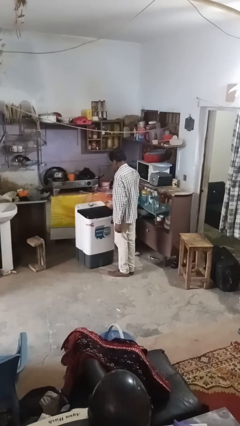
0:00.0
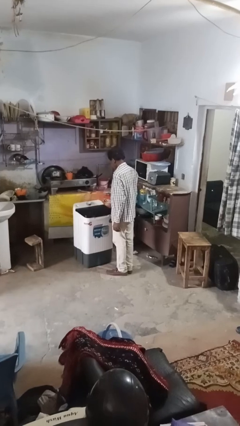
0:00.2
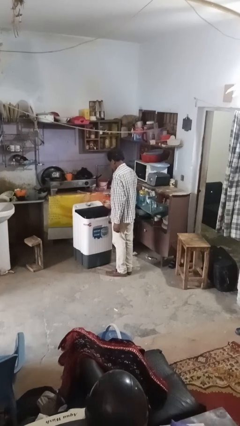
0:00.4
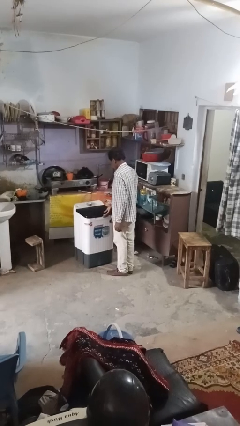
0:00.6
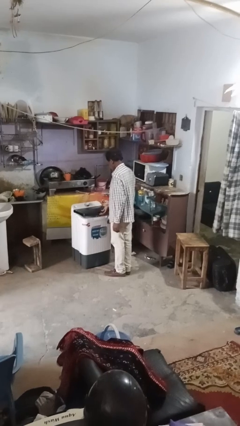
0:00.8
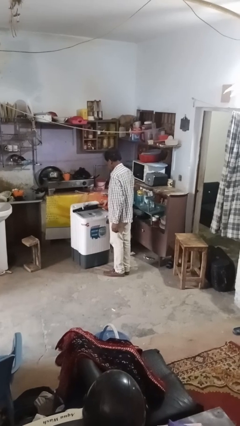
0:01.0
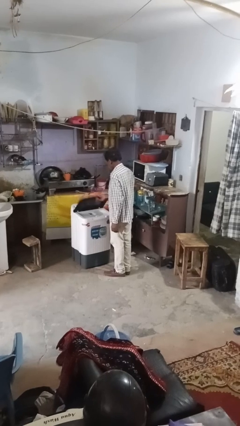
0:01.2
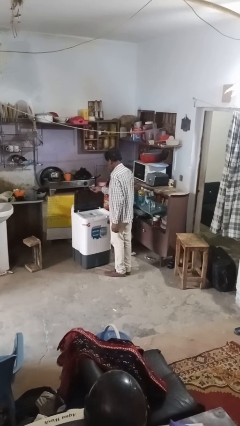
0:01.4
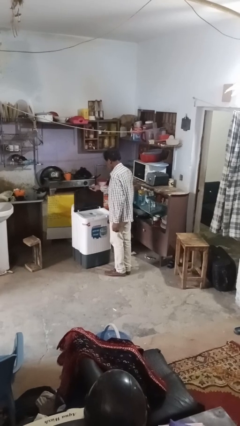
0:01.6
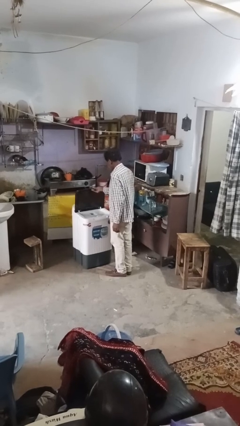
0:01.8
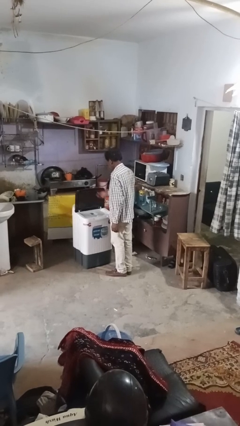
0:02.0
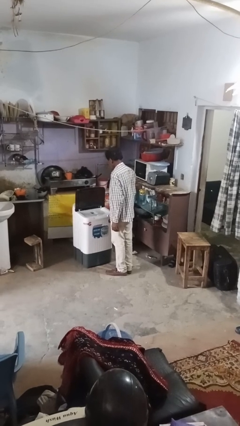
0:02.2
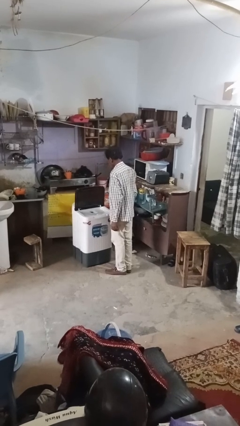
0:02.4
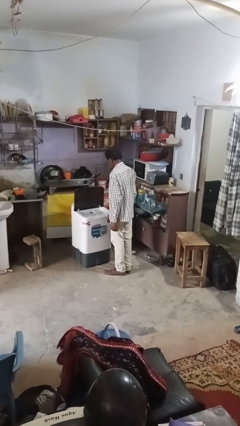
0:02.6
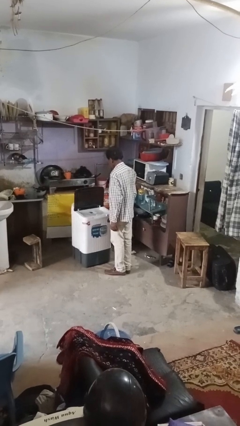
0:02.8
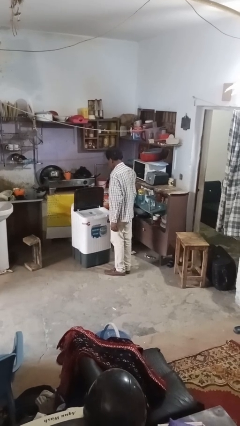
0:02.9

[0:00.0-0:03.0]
person opens clothes washer

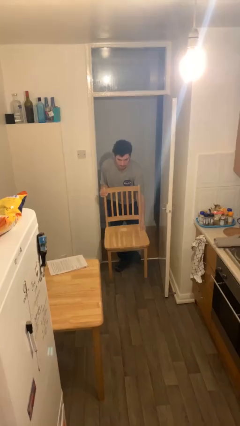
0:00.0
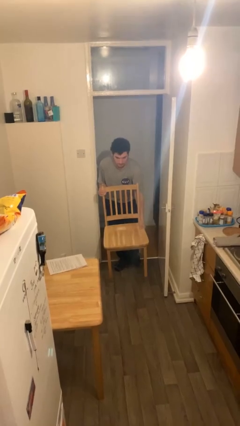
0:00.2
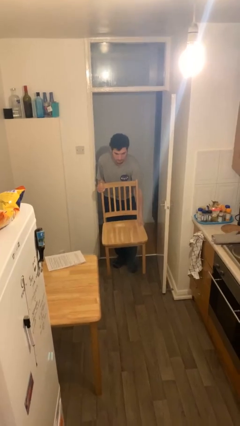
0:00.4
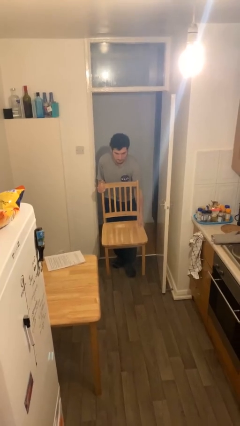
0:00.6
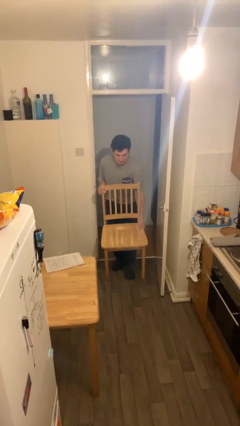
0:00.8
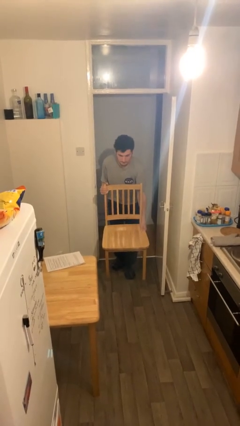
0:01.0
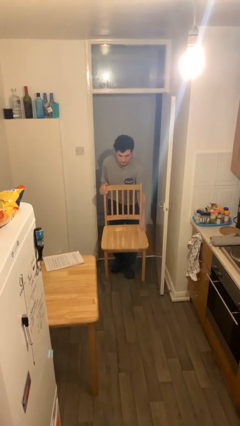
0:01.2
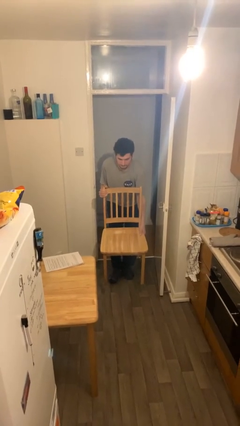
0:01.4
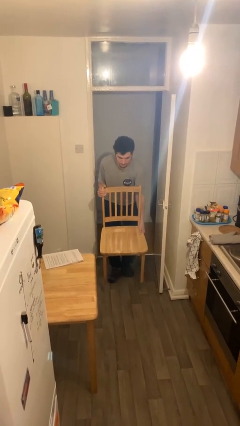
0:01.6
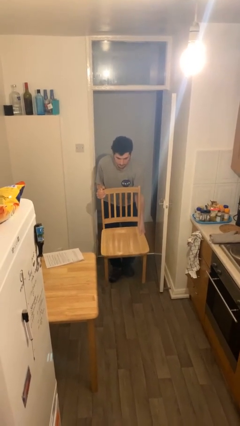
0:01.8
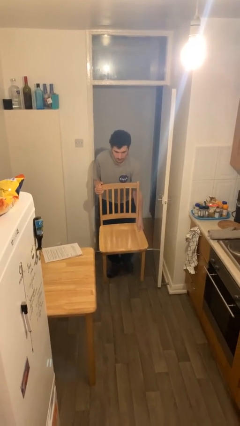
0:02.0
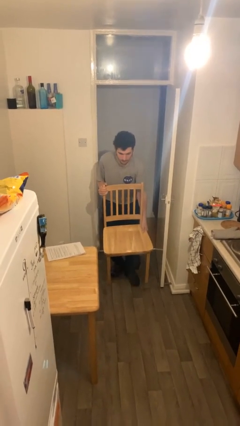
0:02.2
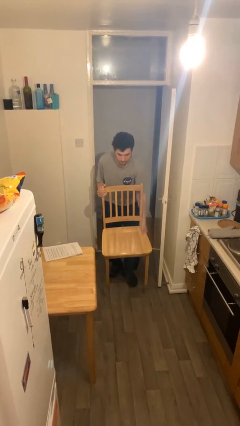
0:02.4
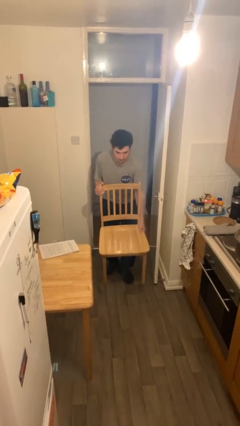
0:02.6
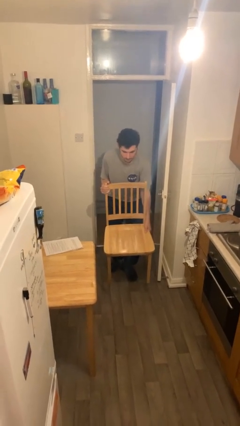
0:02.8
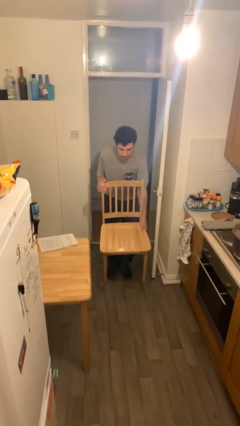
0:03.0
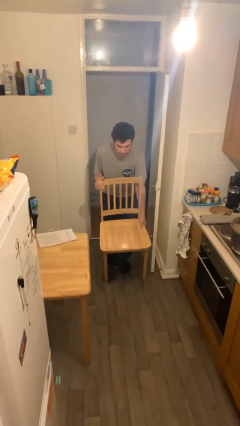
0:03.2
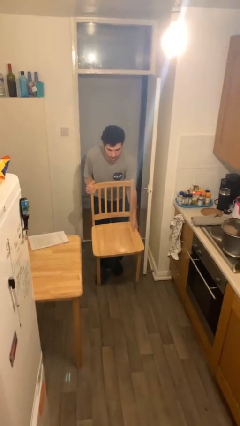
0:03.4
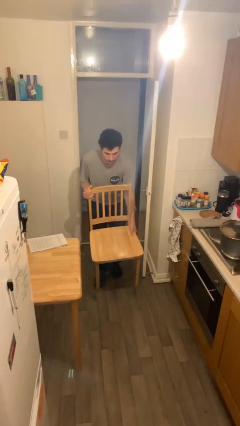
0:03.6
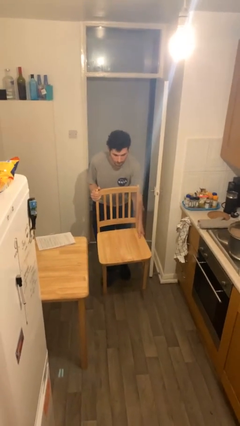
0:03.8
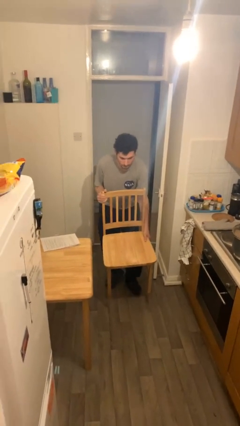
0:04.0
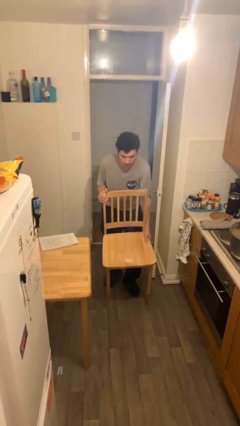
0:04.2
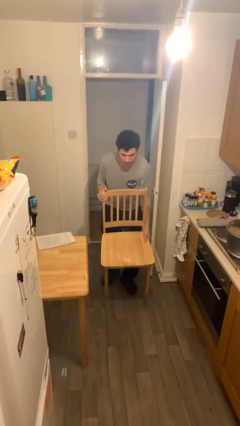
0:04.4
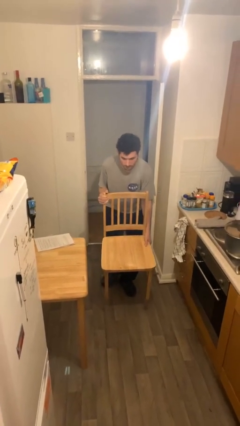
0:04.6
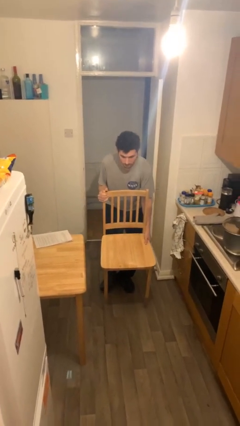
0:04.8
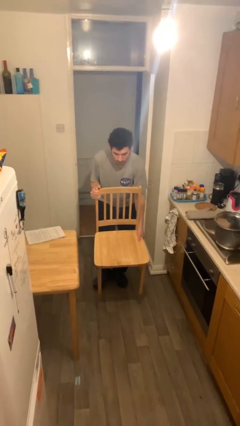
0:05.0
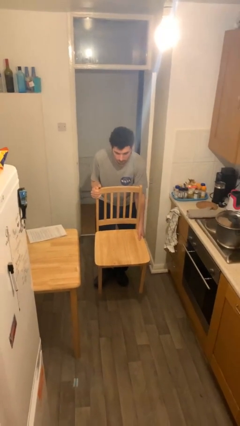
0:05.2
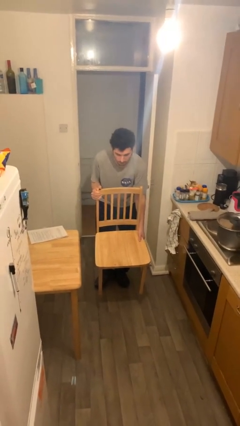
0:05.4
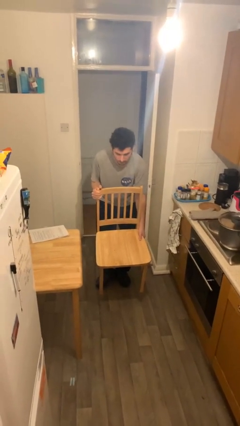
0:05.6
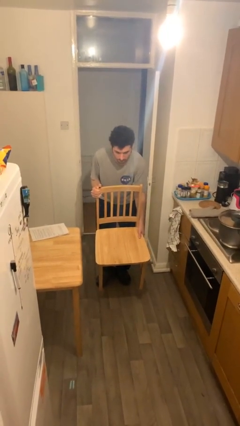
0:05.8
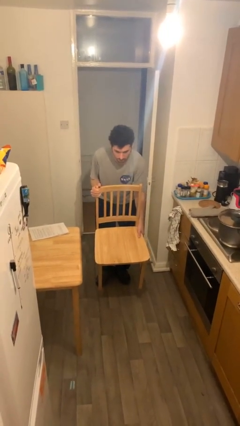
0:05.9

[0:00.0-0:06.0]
person carries heavy object

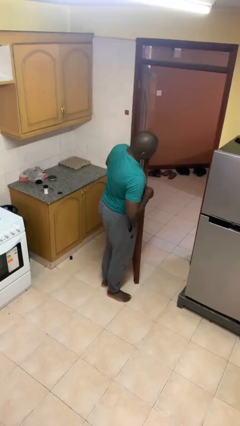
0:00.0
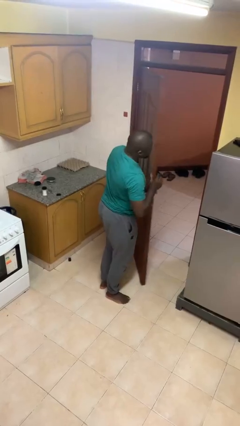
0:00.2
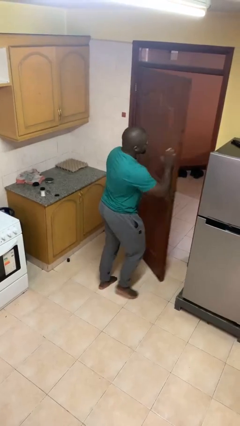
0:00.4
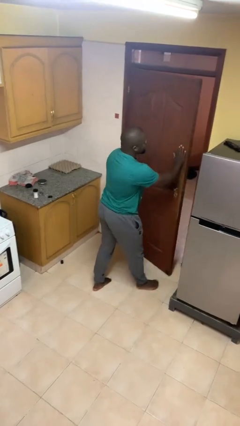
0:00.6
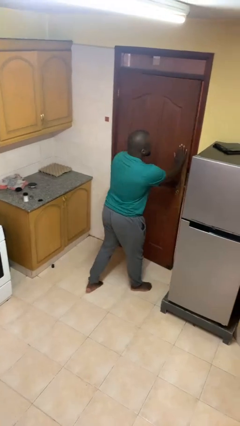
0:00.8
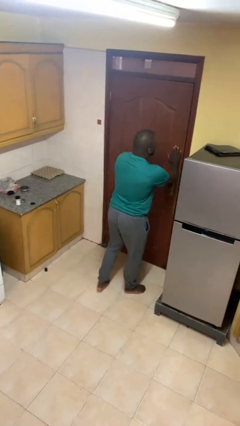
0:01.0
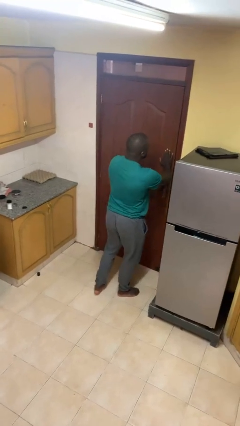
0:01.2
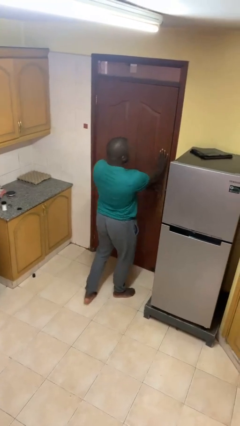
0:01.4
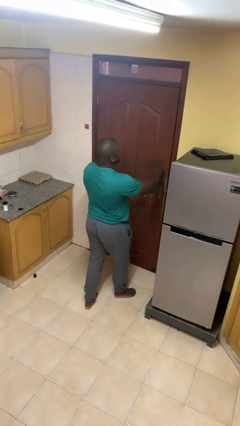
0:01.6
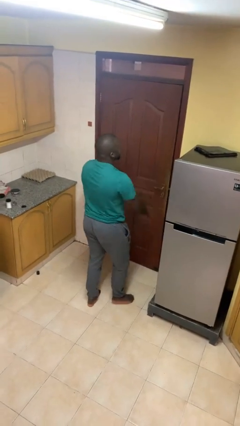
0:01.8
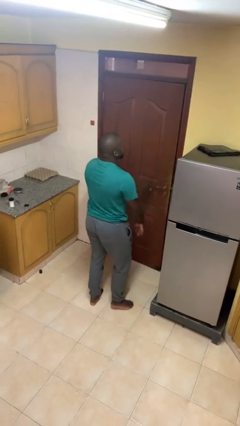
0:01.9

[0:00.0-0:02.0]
person closes facility door

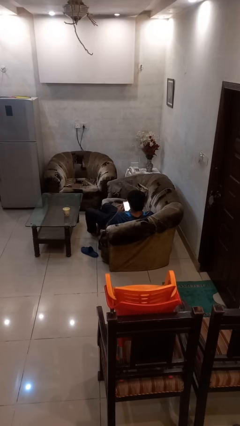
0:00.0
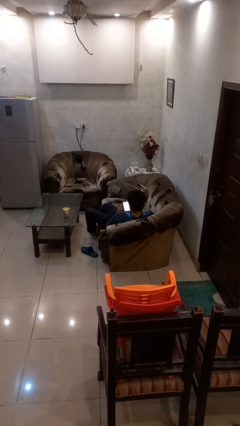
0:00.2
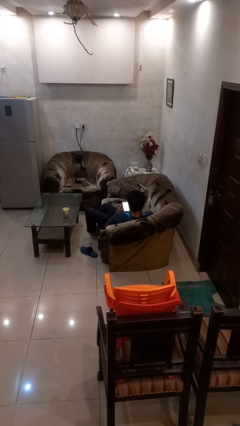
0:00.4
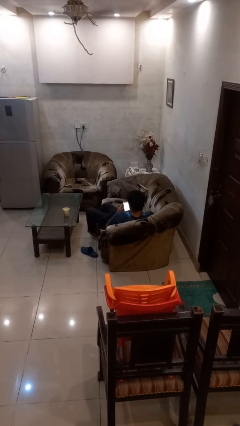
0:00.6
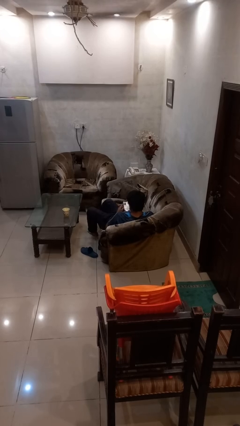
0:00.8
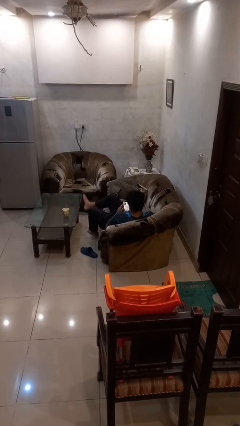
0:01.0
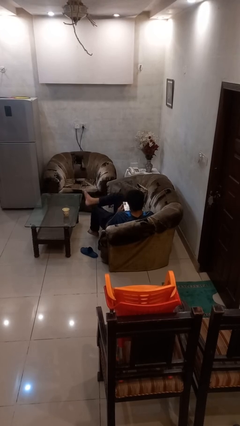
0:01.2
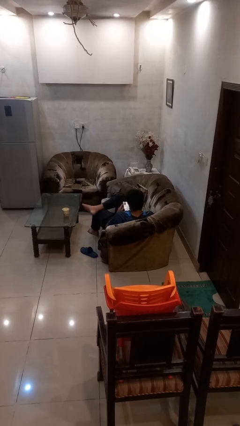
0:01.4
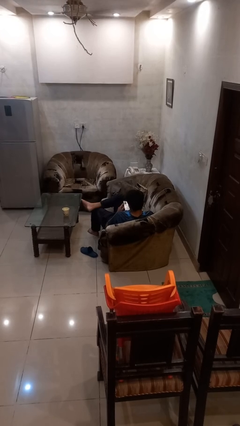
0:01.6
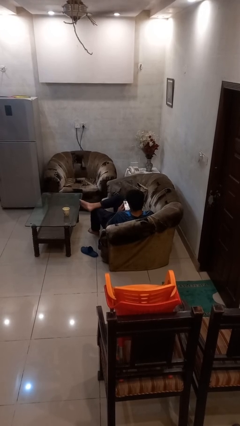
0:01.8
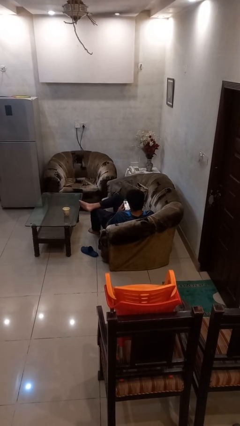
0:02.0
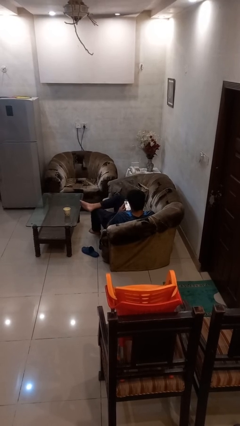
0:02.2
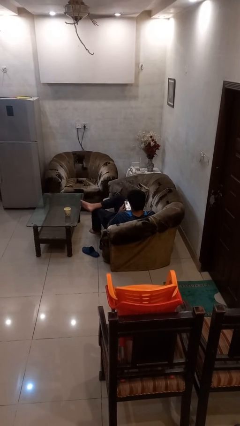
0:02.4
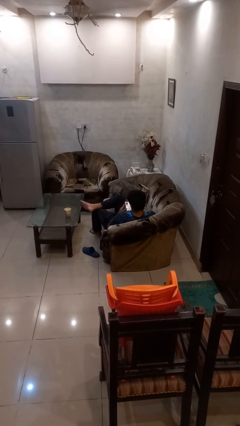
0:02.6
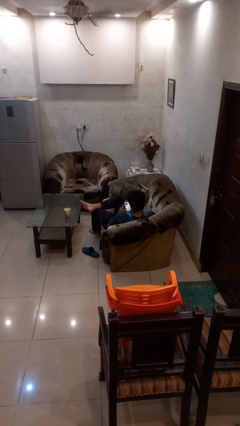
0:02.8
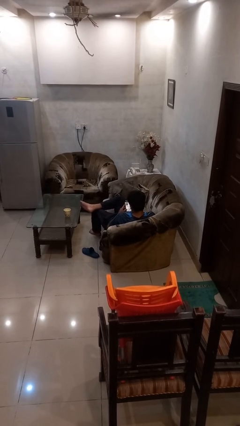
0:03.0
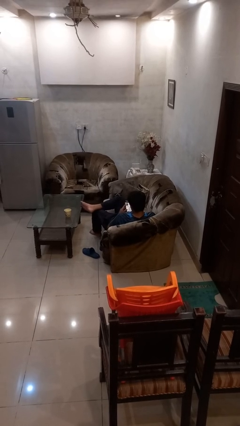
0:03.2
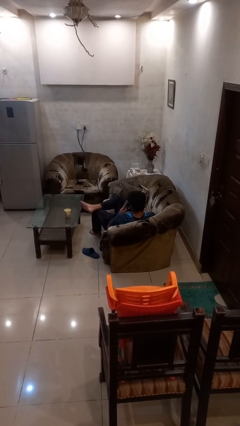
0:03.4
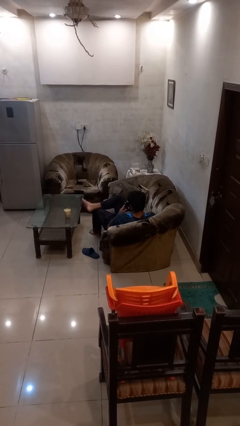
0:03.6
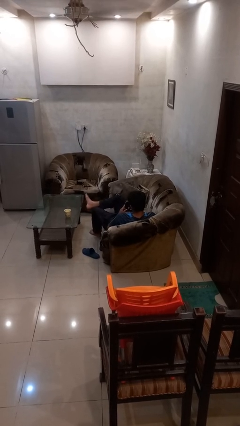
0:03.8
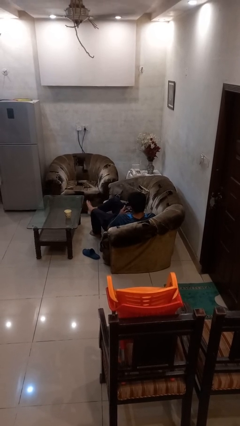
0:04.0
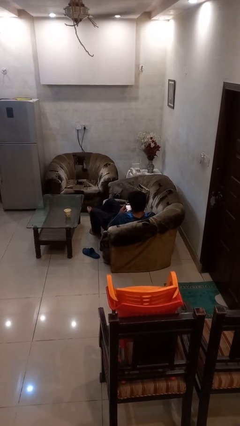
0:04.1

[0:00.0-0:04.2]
person crosses legs

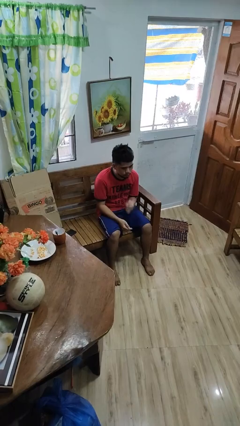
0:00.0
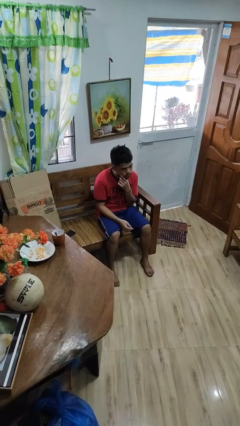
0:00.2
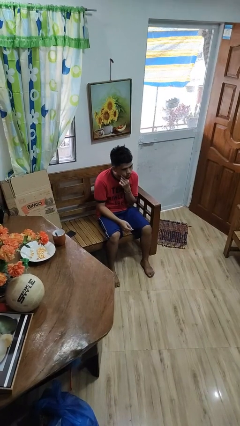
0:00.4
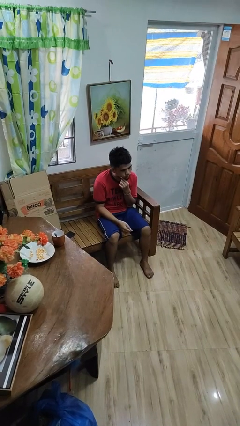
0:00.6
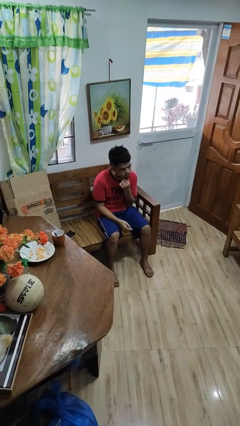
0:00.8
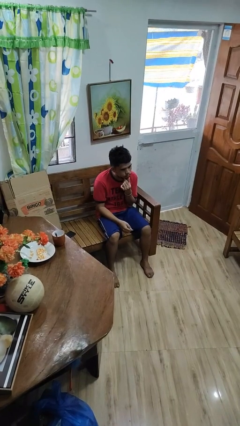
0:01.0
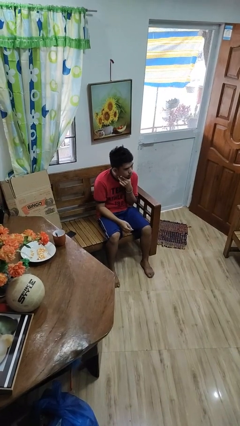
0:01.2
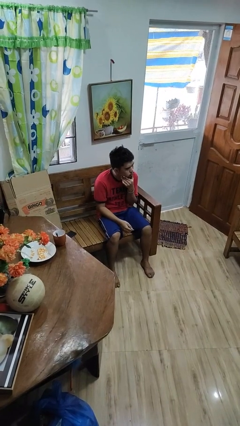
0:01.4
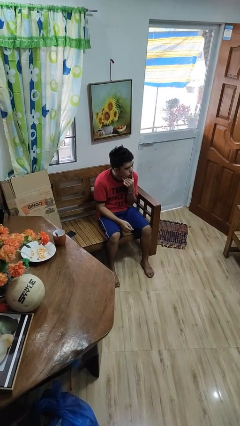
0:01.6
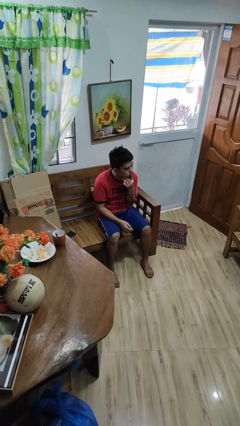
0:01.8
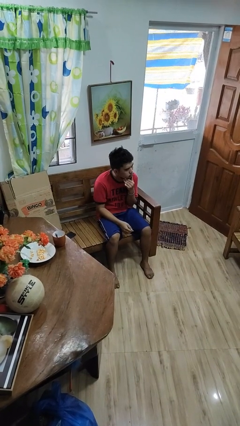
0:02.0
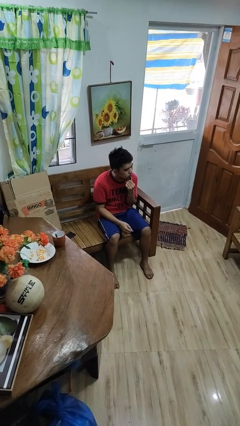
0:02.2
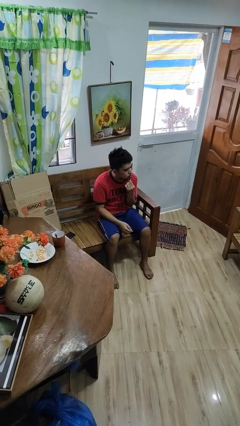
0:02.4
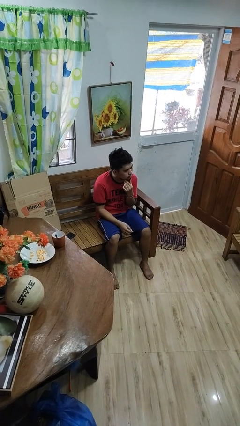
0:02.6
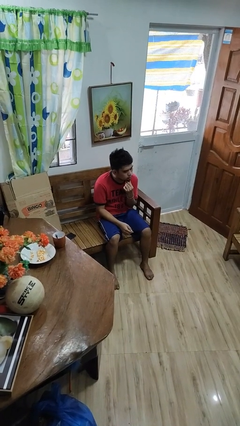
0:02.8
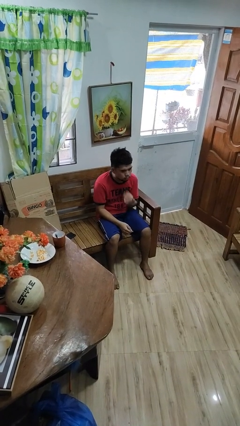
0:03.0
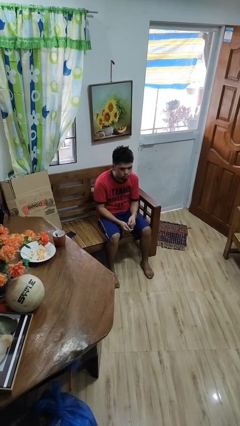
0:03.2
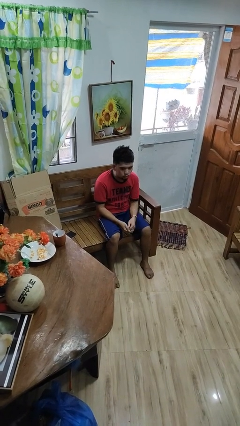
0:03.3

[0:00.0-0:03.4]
person strokes chin
